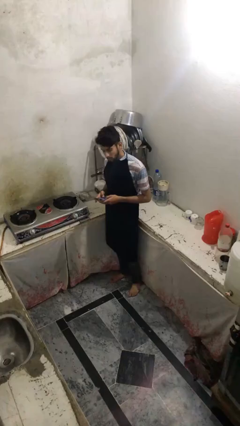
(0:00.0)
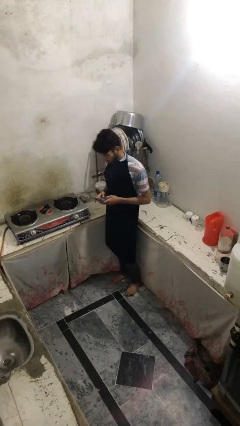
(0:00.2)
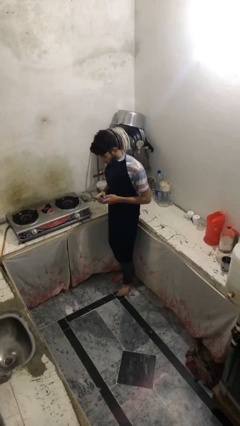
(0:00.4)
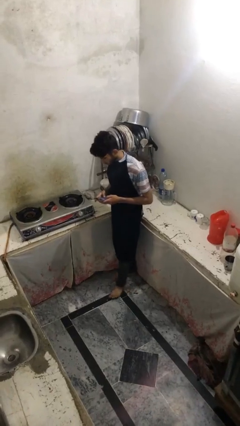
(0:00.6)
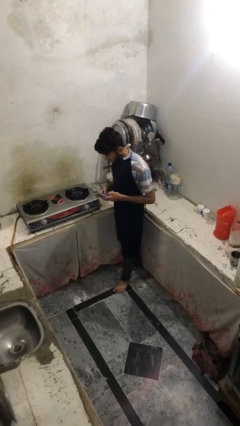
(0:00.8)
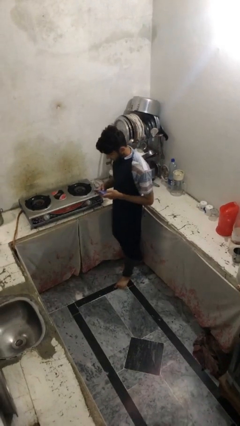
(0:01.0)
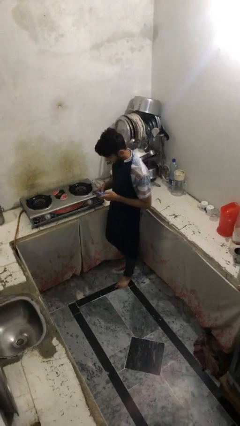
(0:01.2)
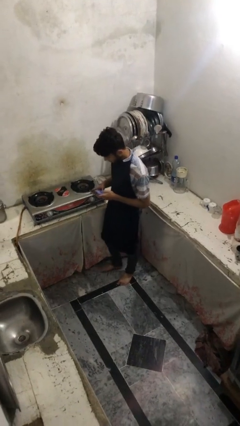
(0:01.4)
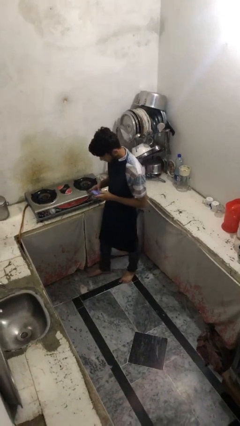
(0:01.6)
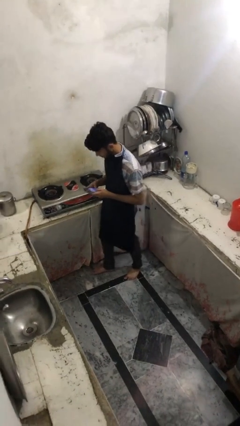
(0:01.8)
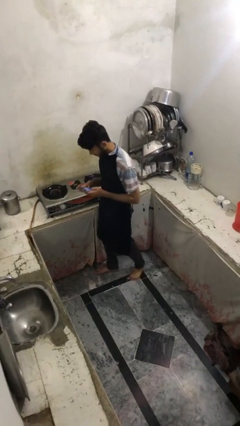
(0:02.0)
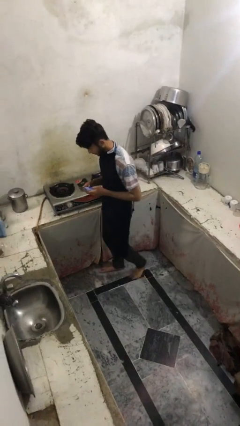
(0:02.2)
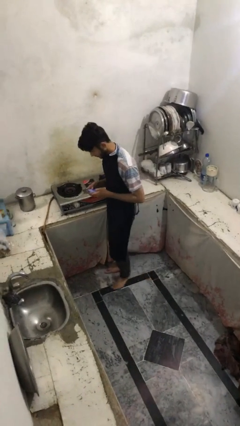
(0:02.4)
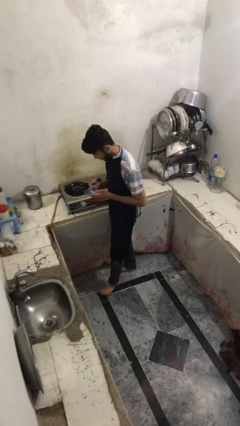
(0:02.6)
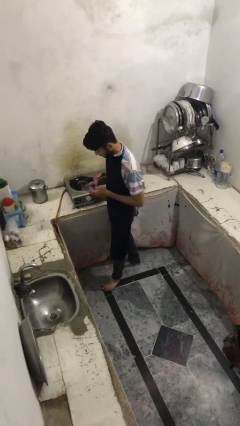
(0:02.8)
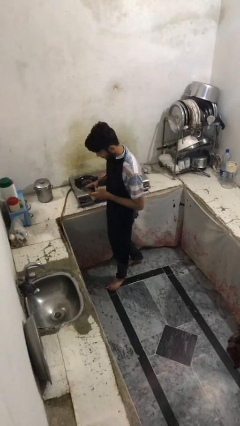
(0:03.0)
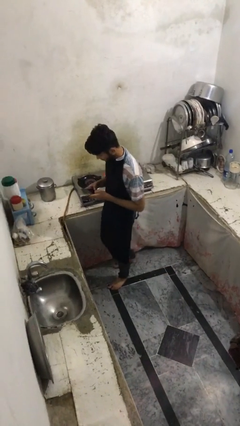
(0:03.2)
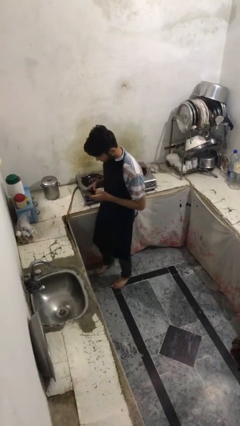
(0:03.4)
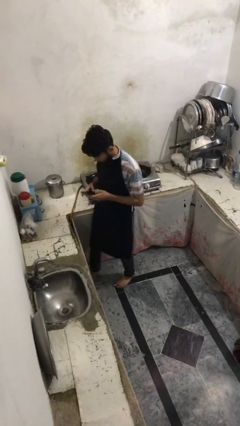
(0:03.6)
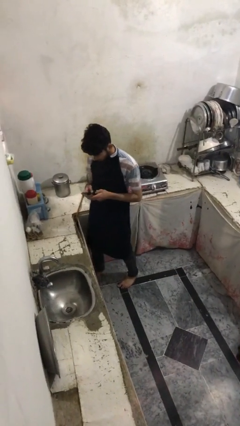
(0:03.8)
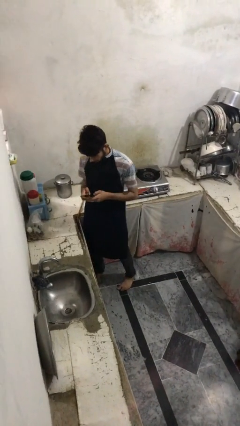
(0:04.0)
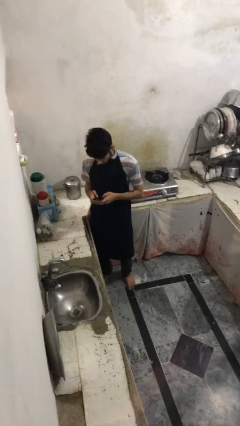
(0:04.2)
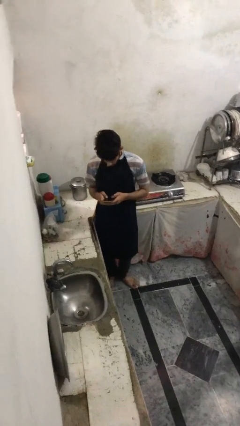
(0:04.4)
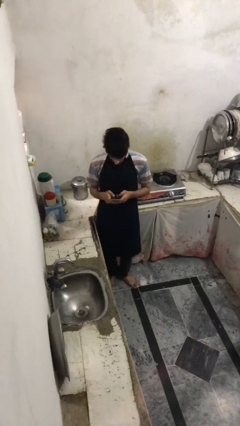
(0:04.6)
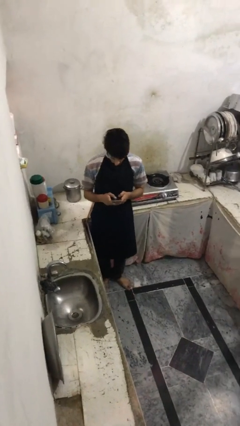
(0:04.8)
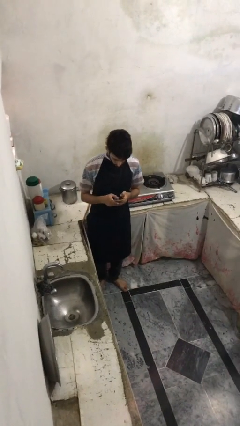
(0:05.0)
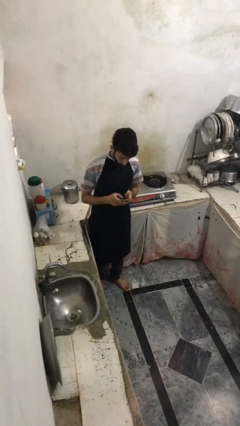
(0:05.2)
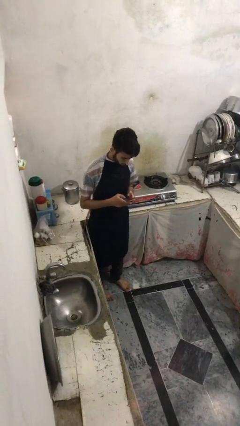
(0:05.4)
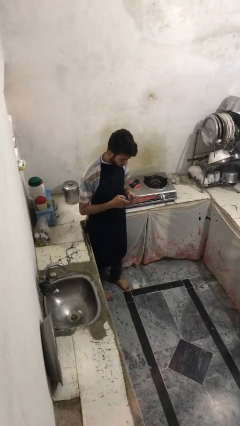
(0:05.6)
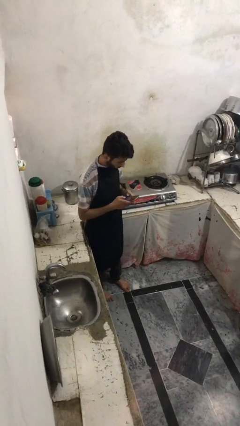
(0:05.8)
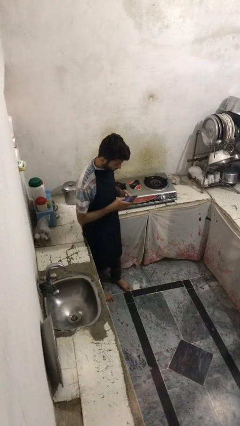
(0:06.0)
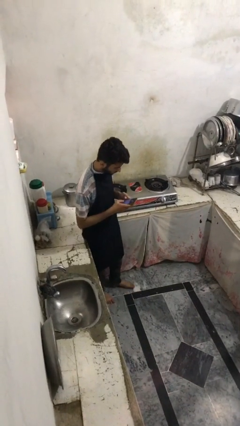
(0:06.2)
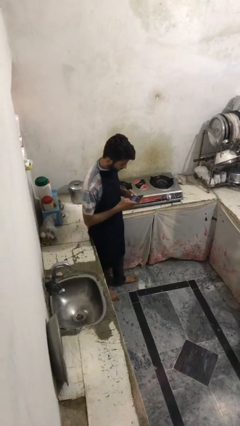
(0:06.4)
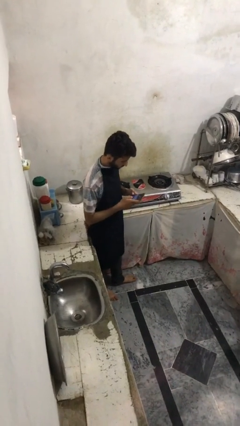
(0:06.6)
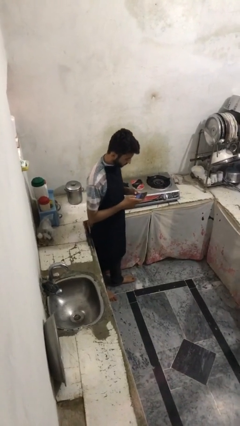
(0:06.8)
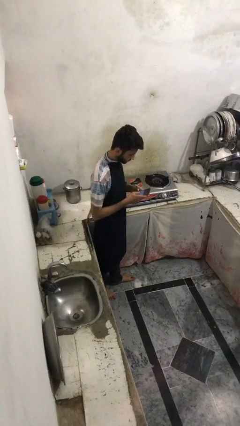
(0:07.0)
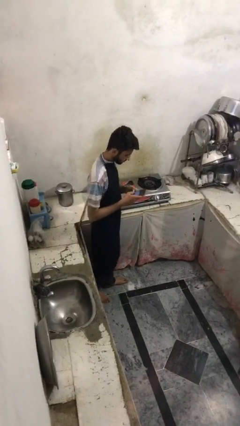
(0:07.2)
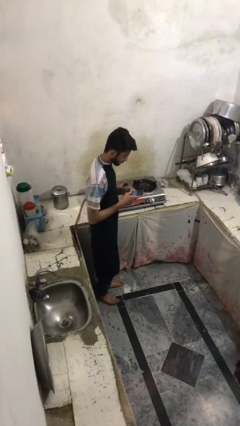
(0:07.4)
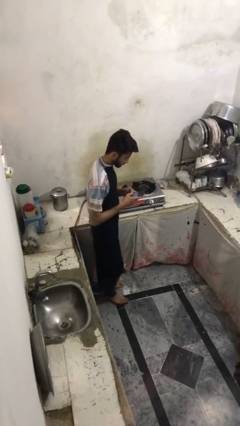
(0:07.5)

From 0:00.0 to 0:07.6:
person texts on phone

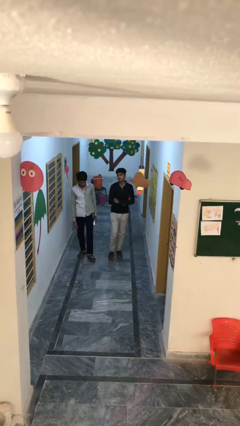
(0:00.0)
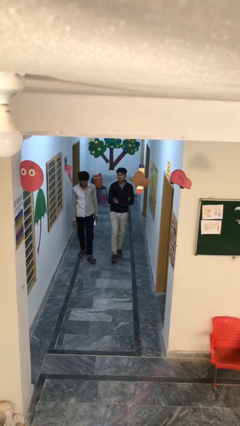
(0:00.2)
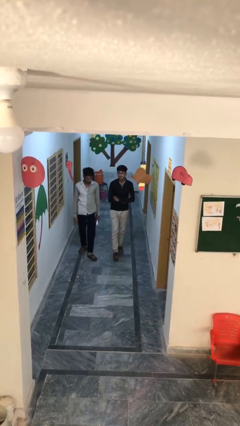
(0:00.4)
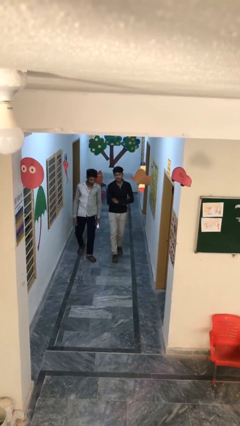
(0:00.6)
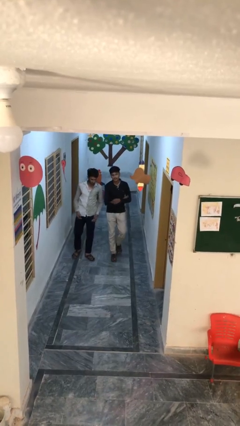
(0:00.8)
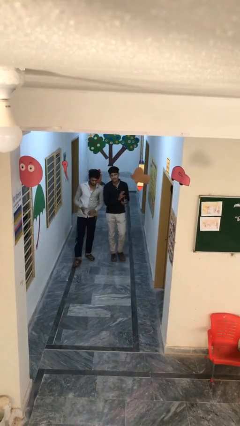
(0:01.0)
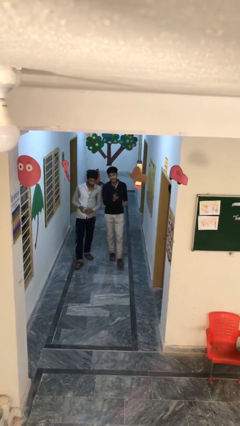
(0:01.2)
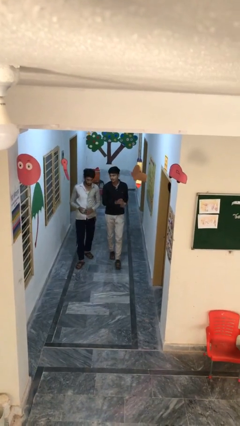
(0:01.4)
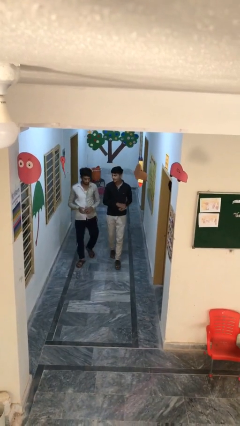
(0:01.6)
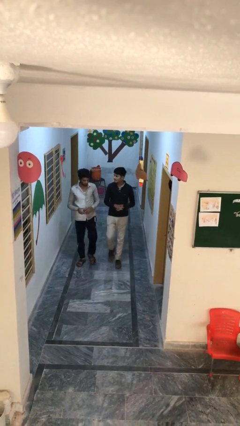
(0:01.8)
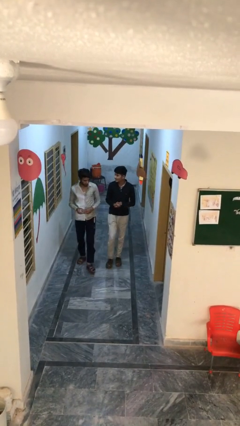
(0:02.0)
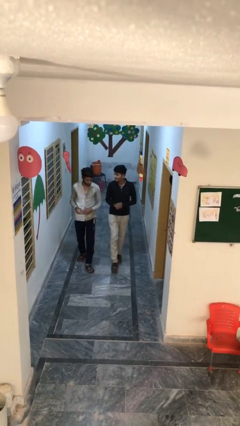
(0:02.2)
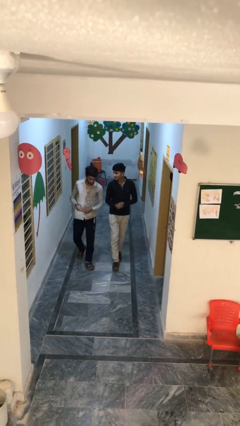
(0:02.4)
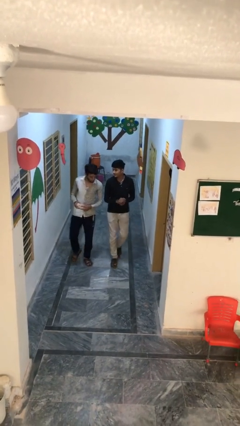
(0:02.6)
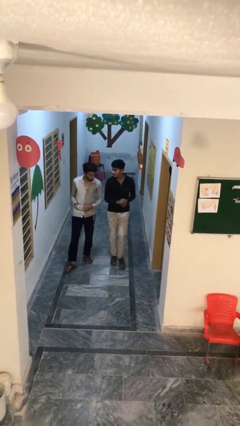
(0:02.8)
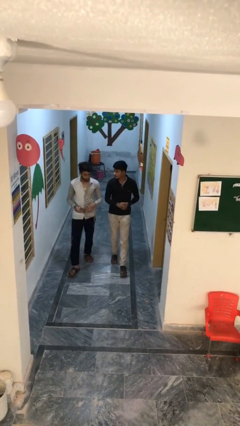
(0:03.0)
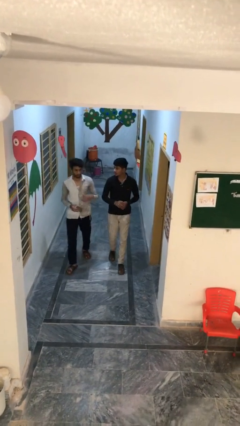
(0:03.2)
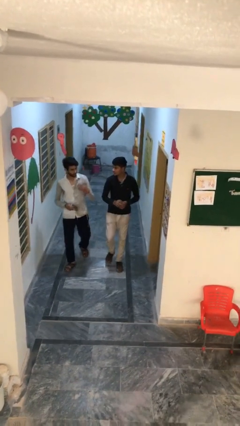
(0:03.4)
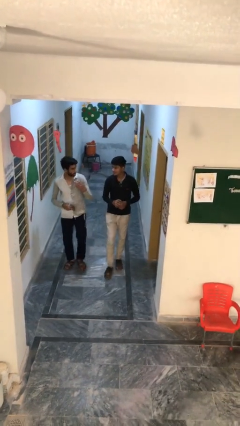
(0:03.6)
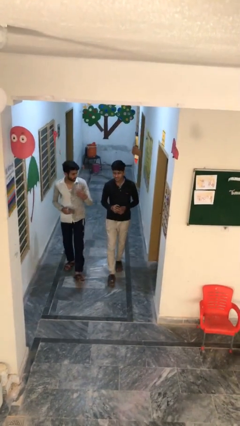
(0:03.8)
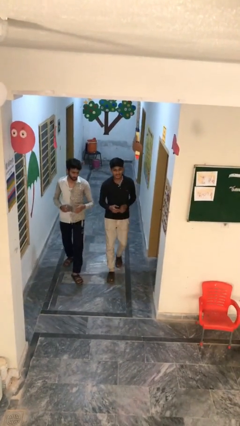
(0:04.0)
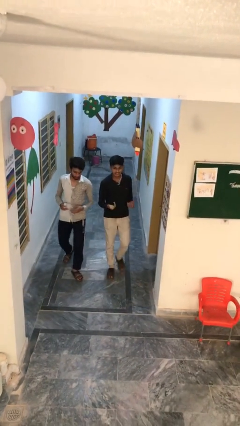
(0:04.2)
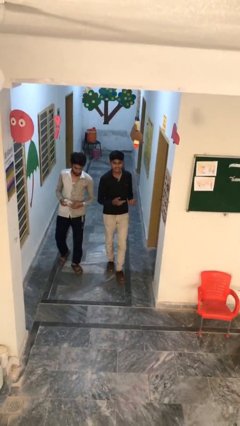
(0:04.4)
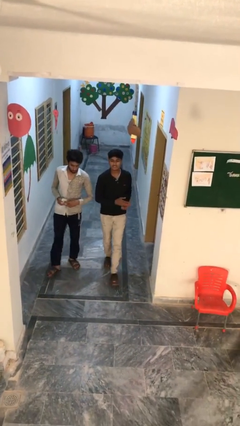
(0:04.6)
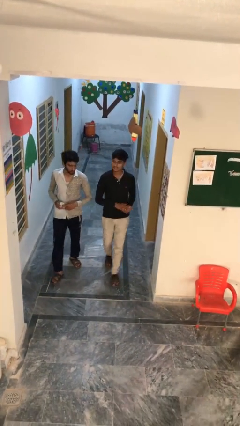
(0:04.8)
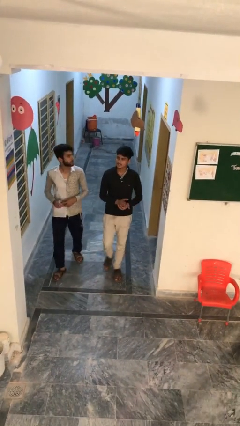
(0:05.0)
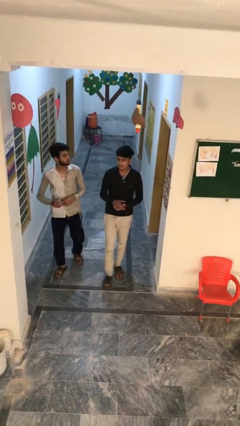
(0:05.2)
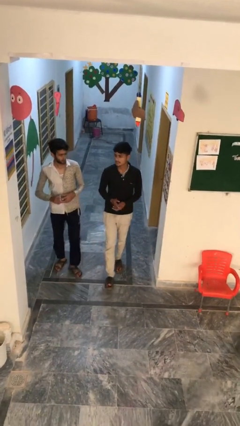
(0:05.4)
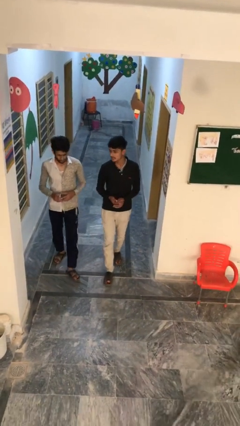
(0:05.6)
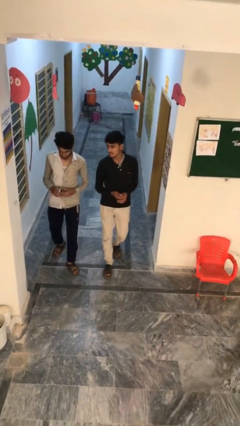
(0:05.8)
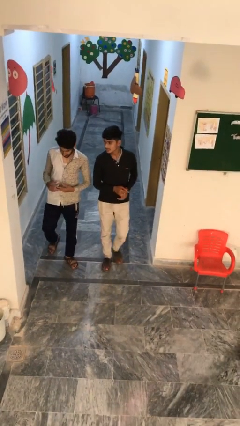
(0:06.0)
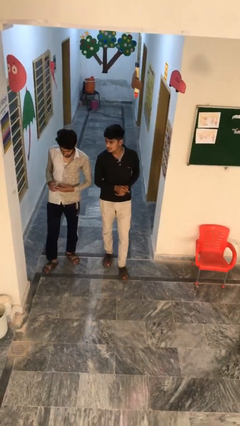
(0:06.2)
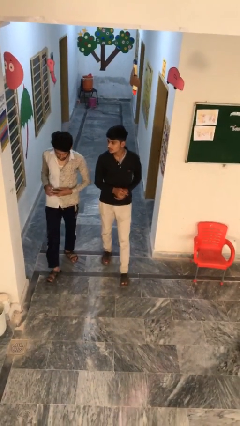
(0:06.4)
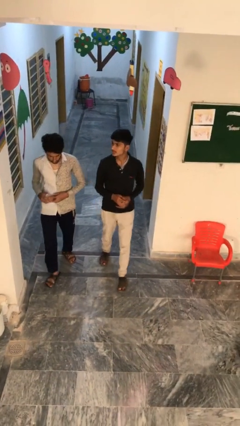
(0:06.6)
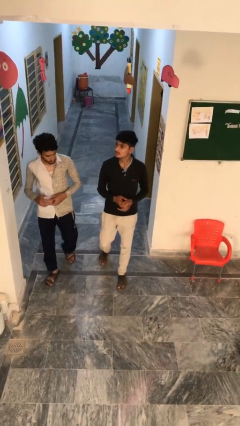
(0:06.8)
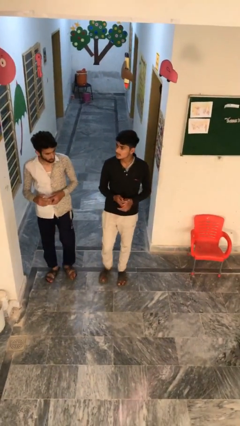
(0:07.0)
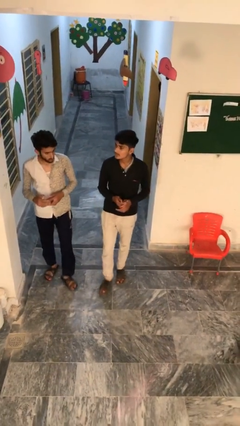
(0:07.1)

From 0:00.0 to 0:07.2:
person talks to person

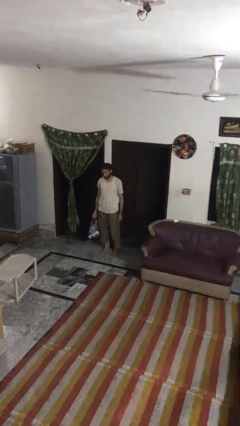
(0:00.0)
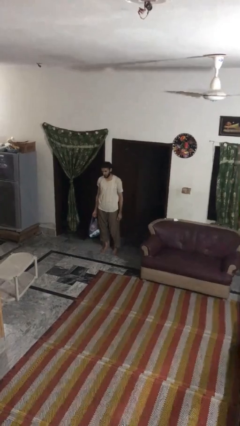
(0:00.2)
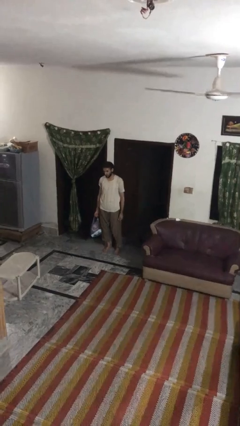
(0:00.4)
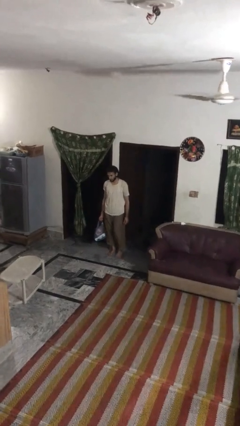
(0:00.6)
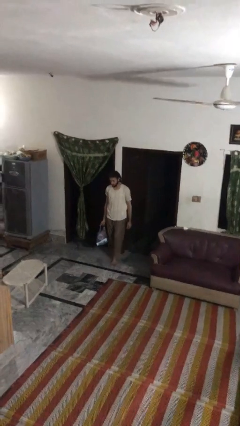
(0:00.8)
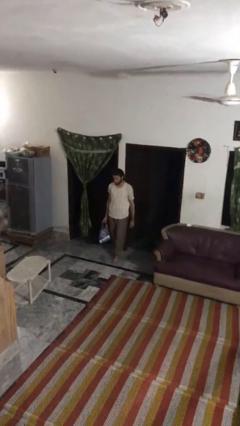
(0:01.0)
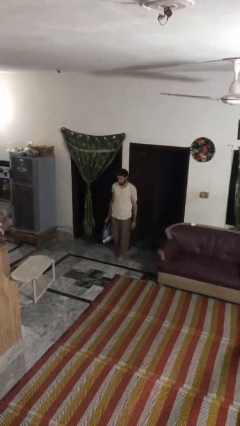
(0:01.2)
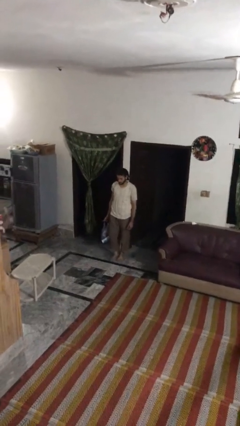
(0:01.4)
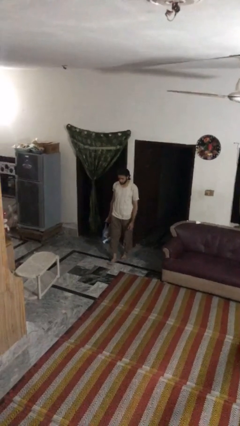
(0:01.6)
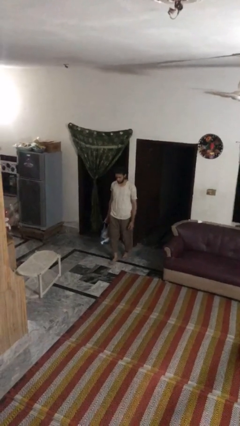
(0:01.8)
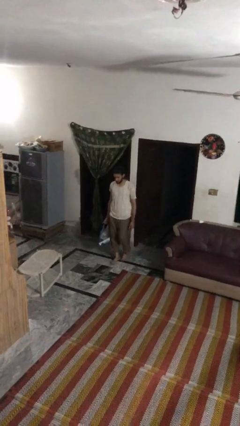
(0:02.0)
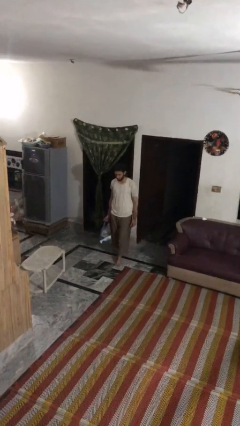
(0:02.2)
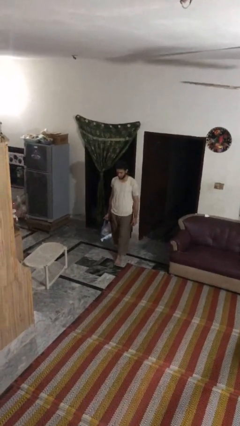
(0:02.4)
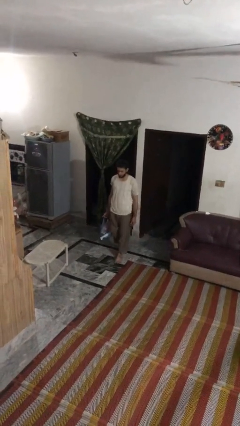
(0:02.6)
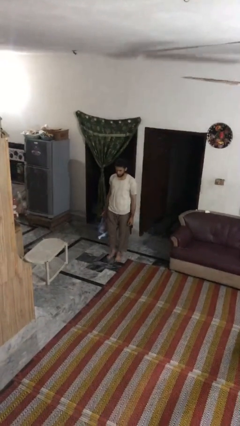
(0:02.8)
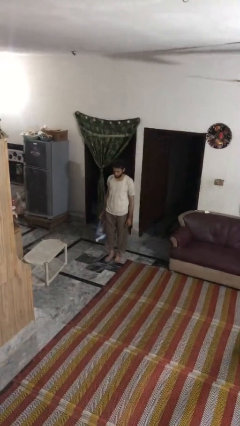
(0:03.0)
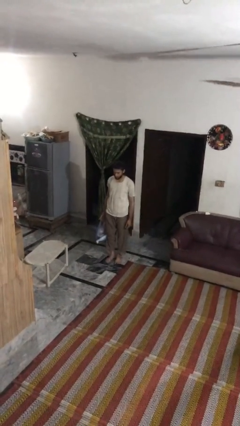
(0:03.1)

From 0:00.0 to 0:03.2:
person carries groceries
